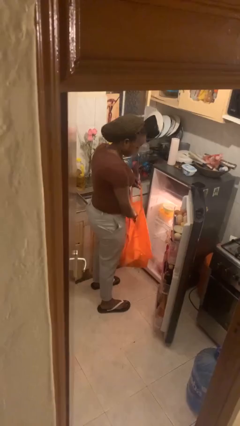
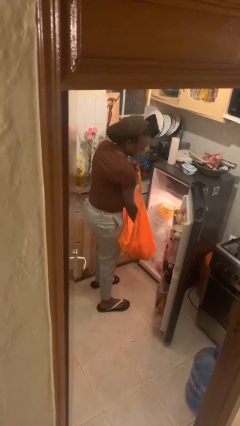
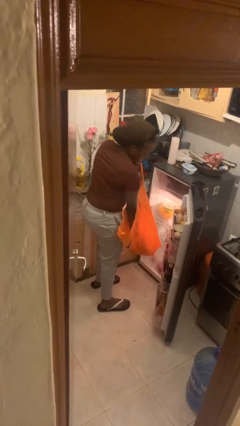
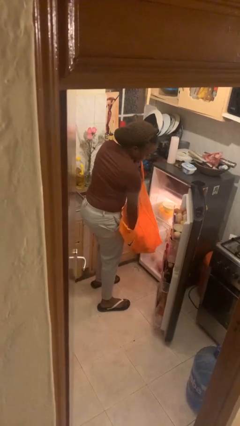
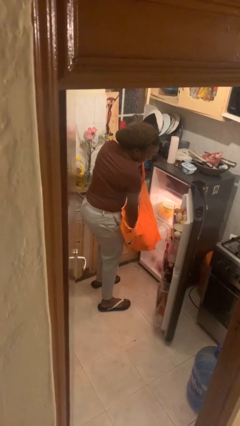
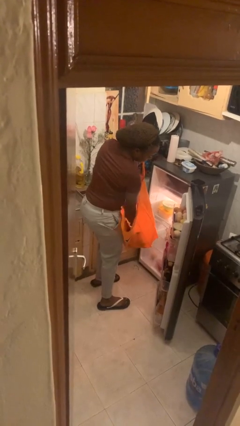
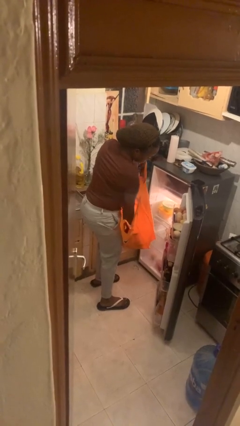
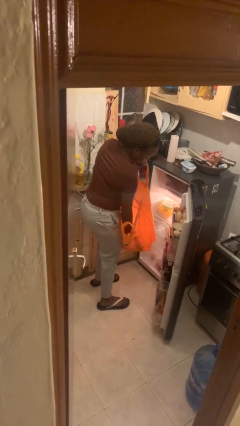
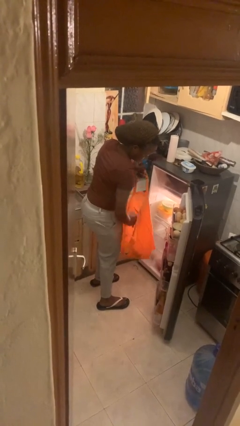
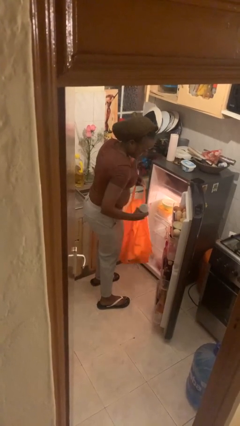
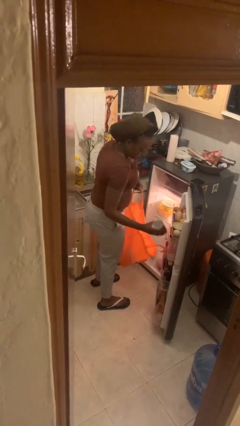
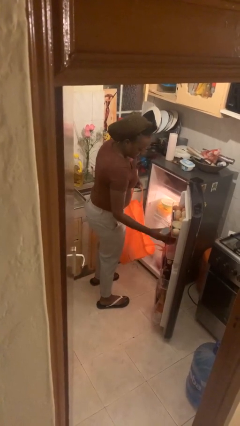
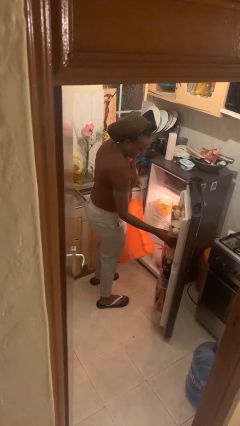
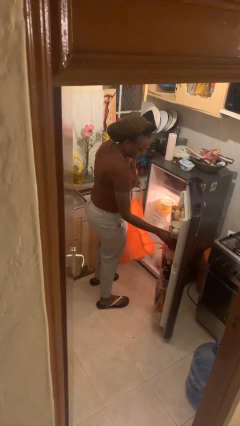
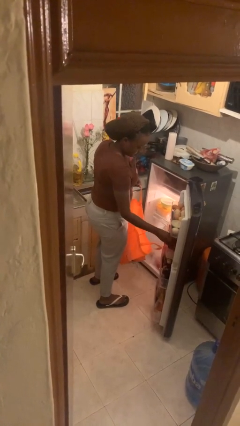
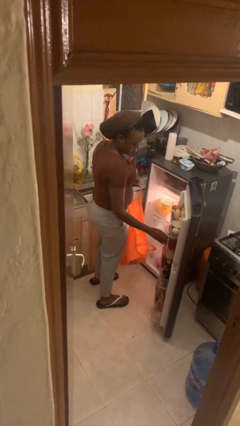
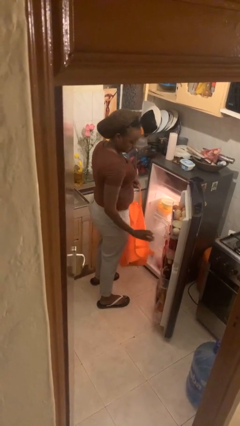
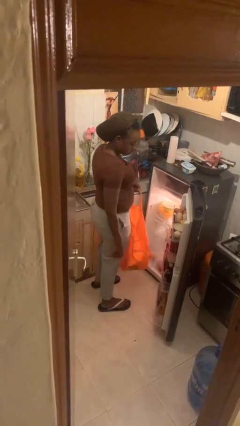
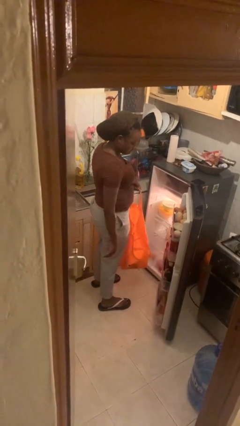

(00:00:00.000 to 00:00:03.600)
person loads groceries into refrigerator

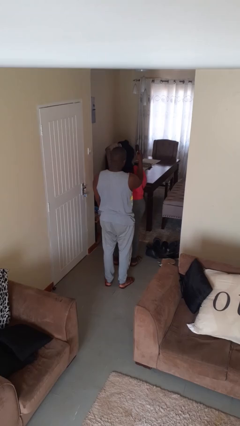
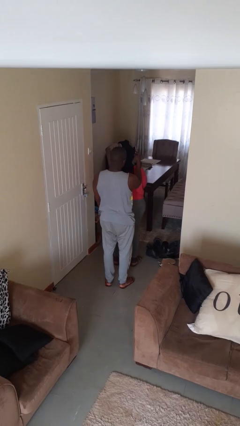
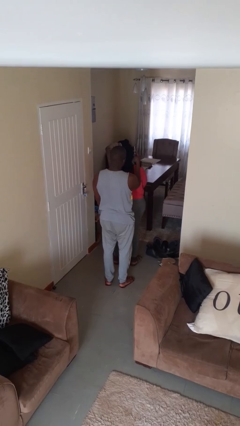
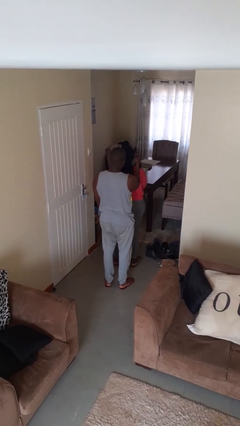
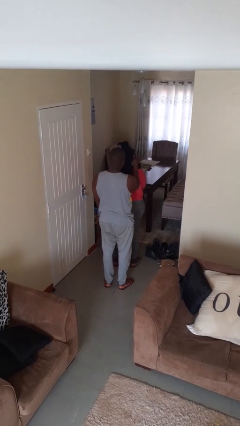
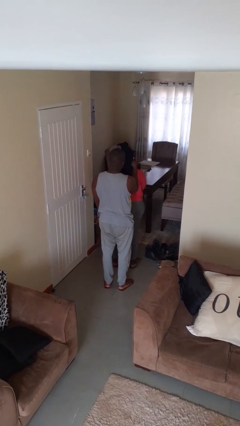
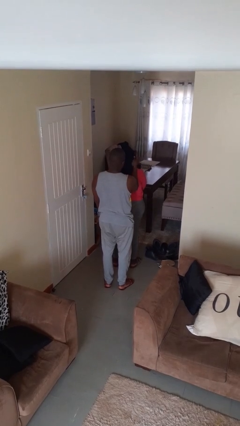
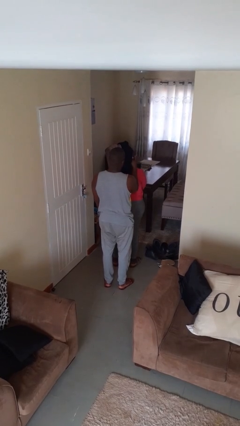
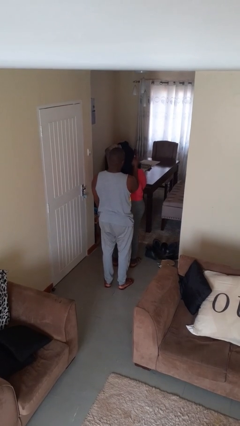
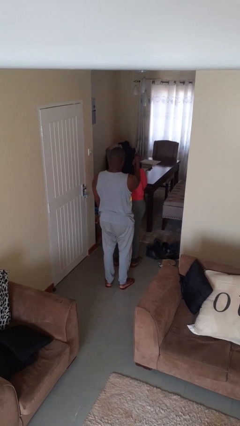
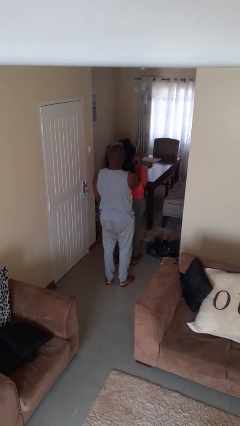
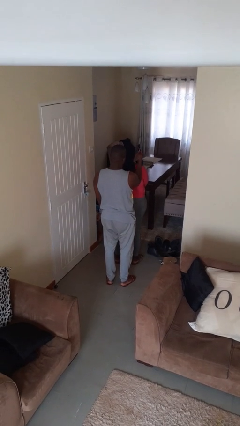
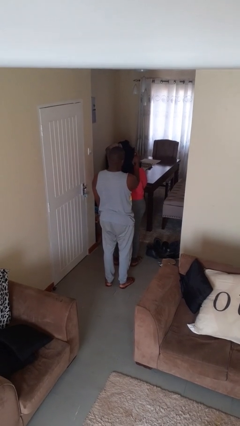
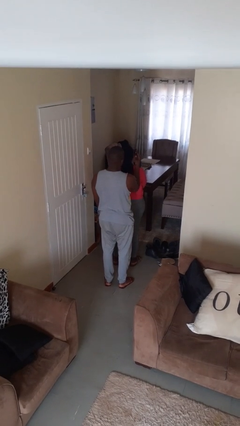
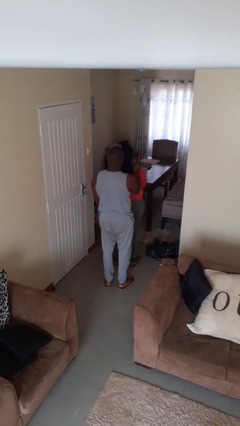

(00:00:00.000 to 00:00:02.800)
person brushes hair of person

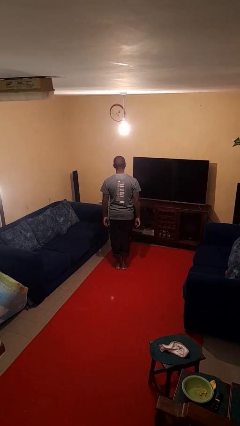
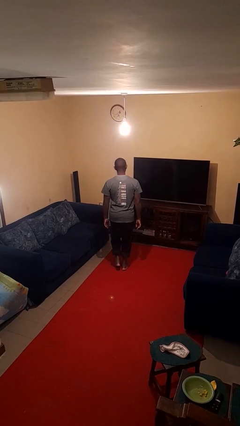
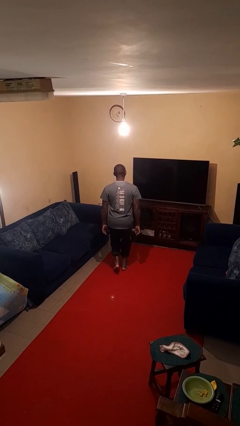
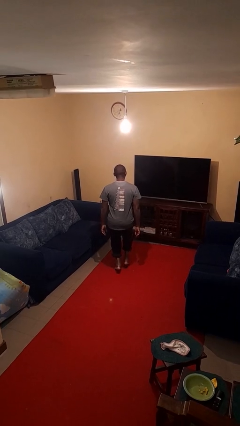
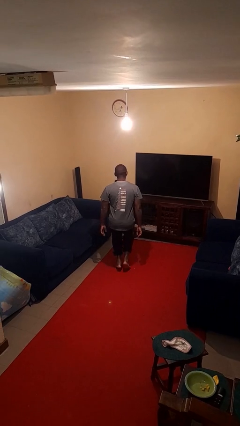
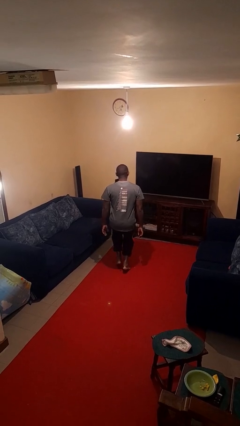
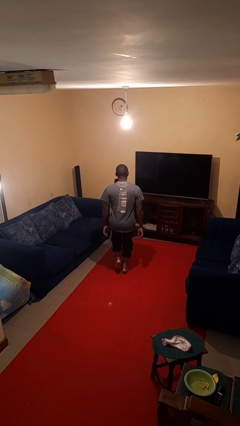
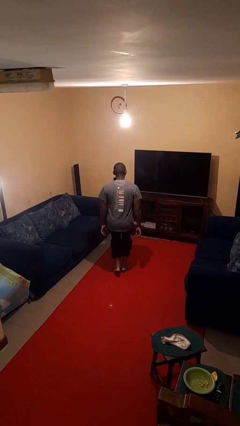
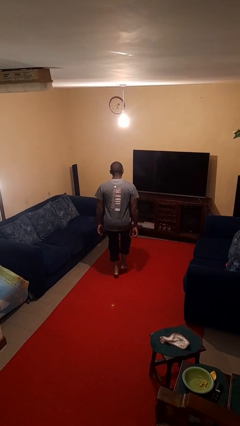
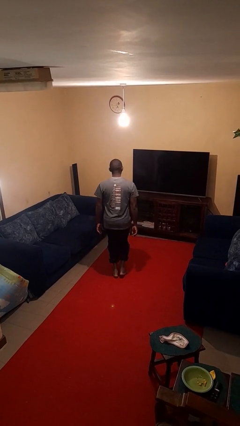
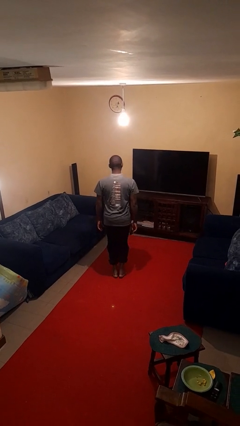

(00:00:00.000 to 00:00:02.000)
person walks tiptoe

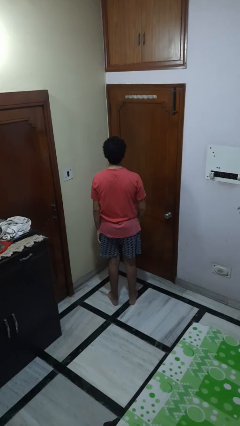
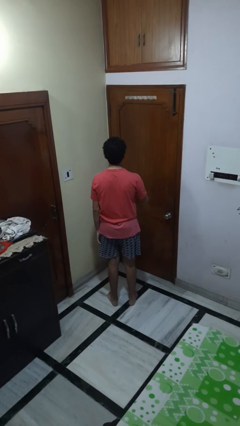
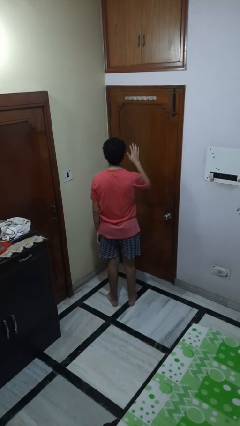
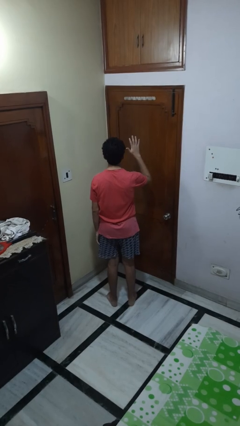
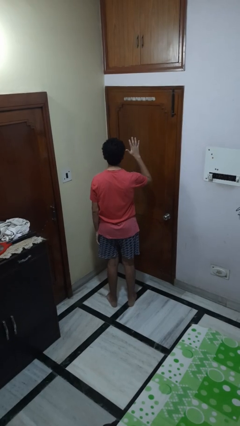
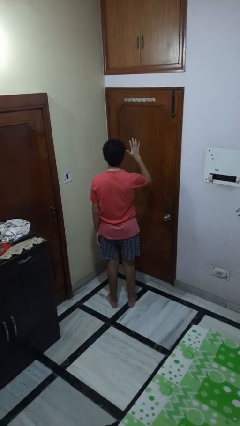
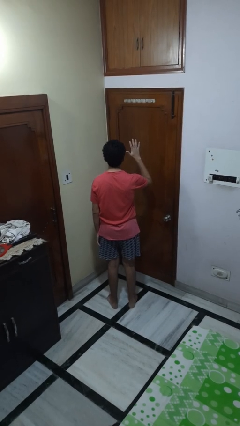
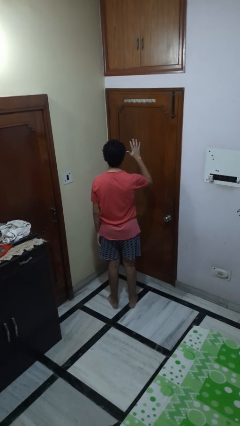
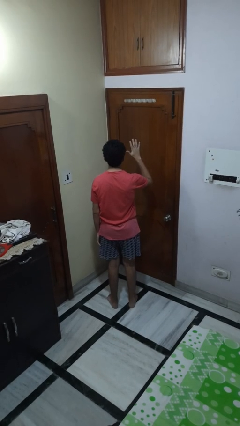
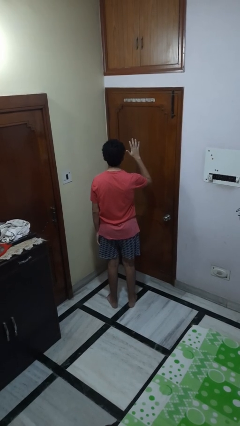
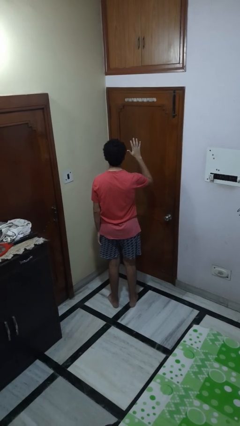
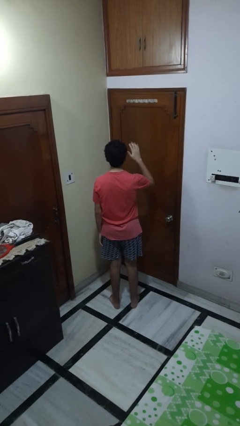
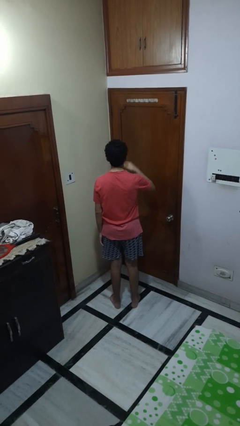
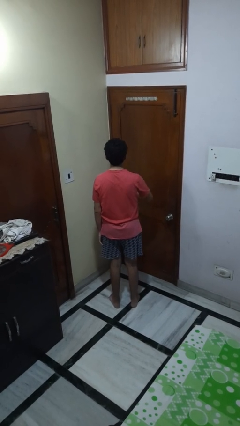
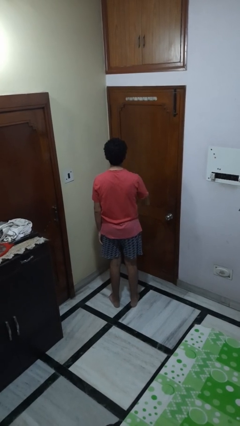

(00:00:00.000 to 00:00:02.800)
person gestures number five

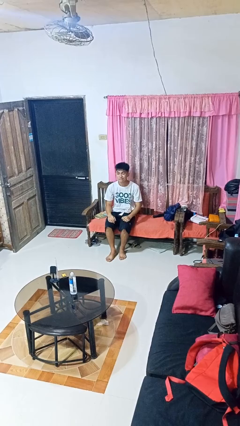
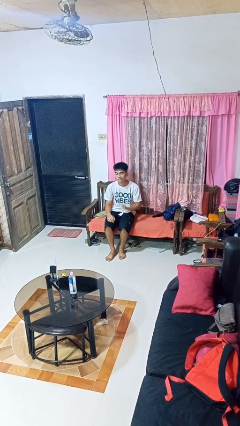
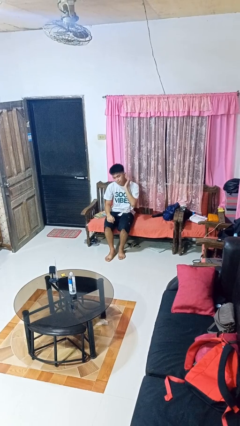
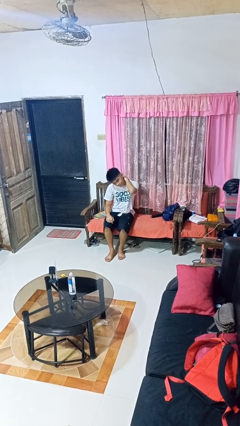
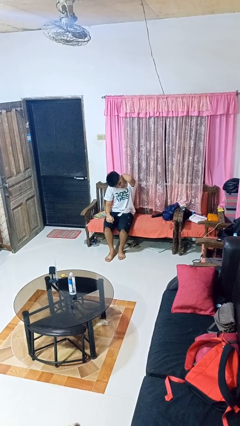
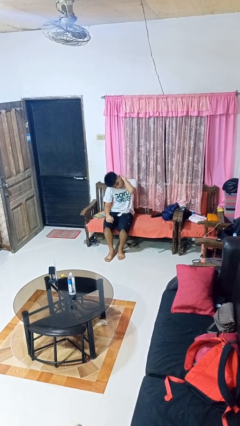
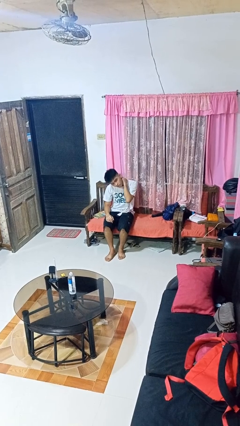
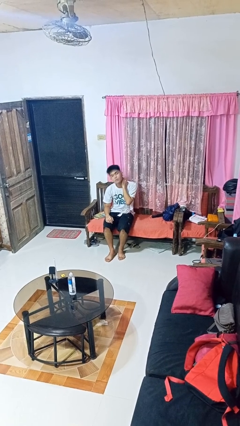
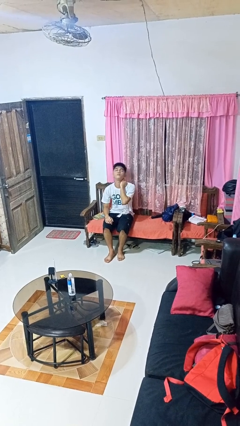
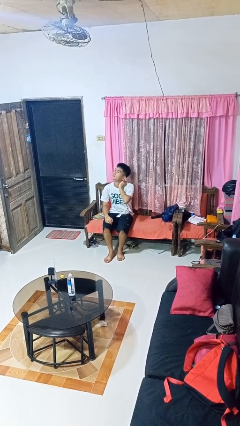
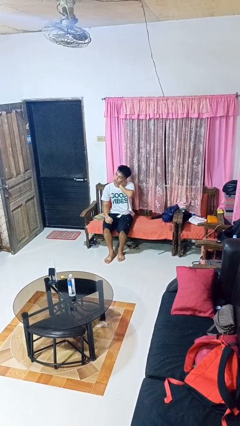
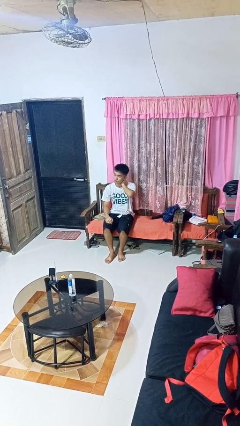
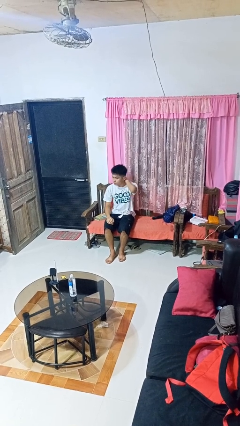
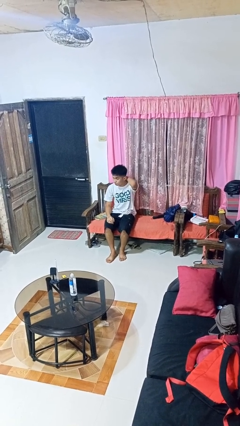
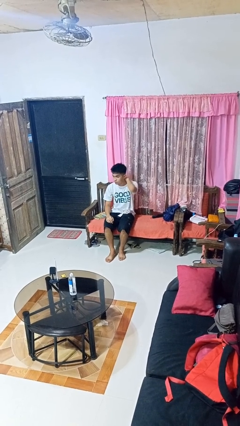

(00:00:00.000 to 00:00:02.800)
person rubs neck

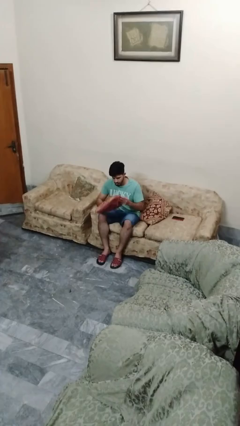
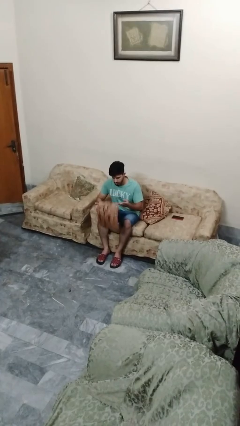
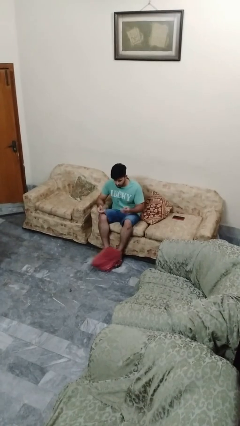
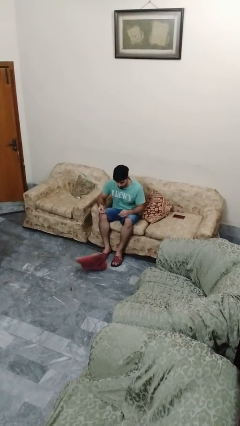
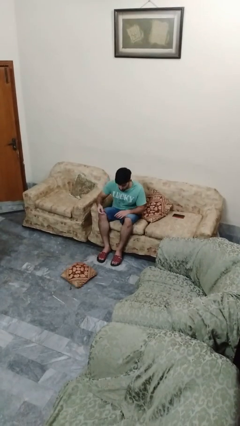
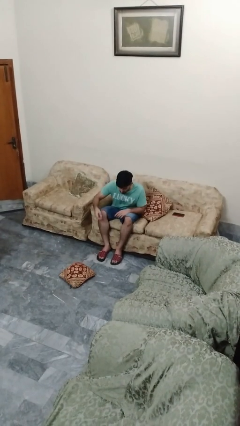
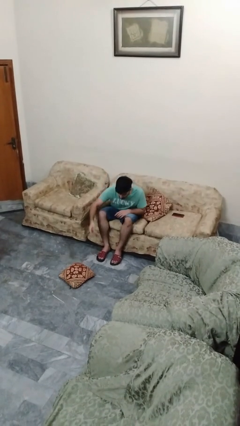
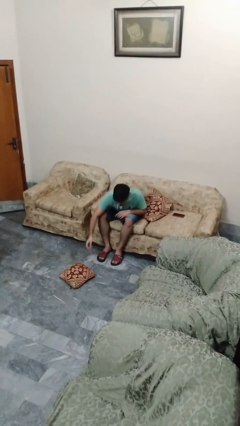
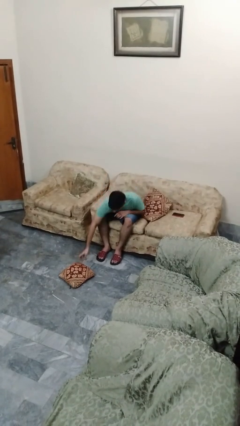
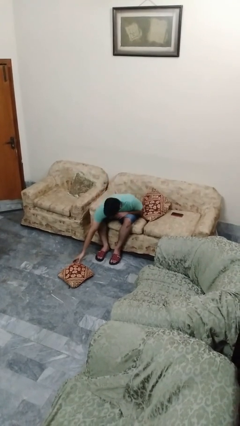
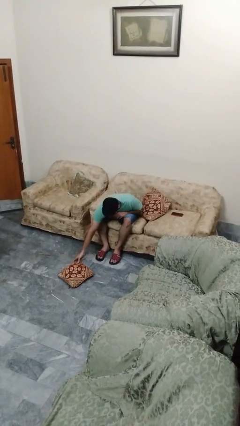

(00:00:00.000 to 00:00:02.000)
person drops object

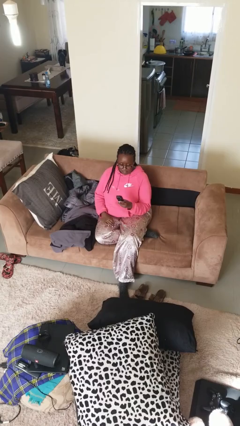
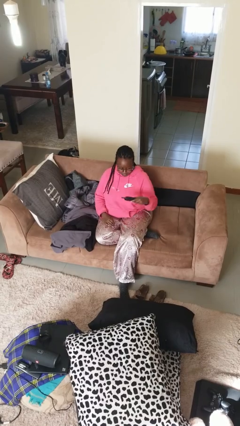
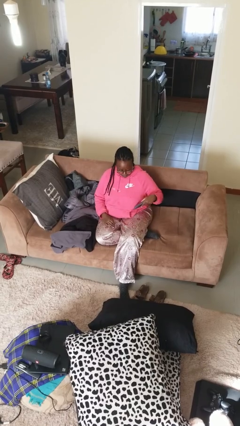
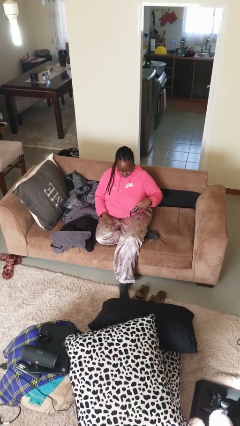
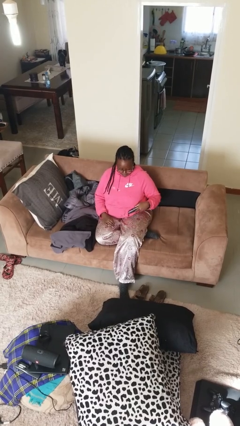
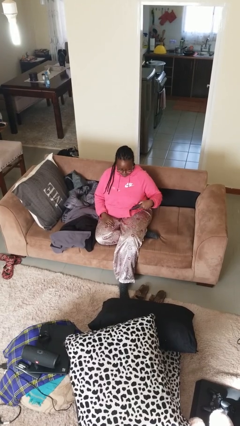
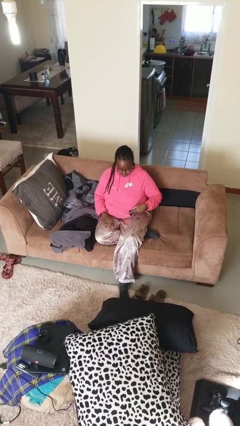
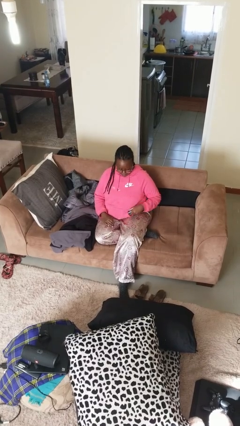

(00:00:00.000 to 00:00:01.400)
person puts phone into pocket
